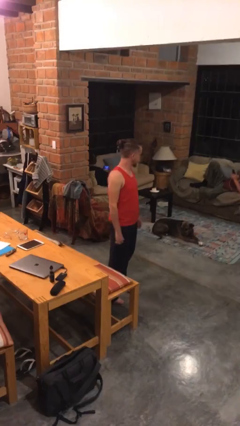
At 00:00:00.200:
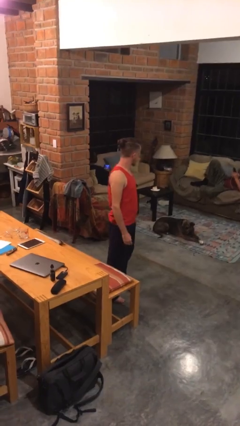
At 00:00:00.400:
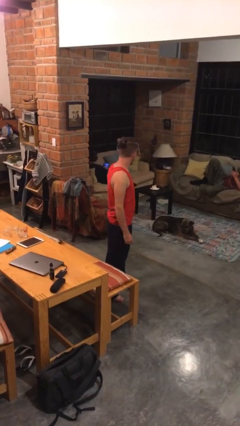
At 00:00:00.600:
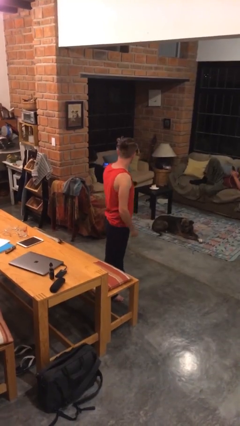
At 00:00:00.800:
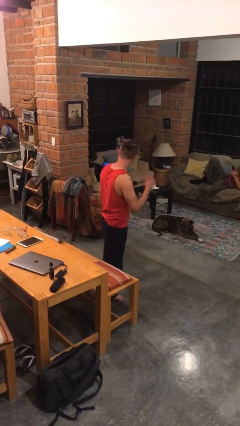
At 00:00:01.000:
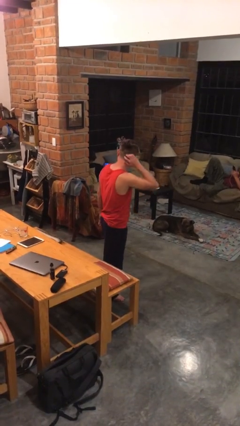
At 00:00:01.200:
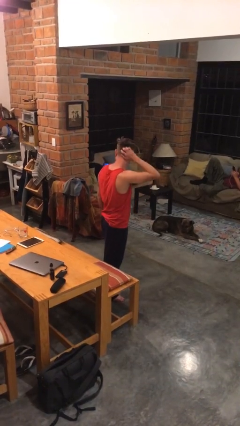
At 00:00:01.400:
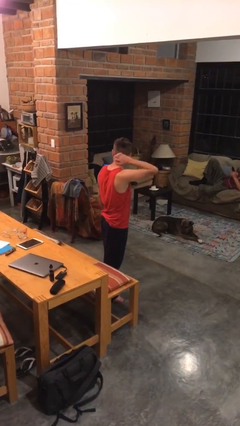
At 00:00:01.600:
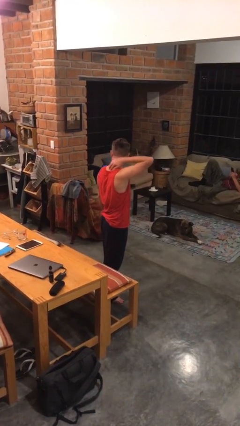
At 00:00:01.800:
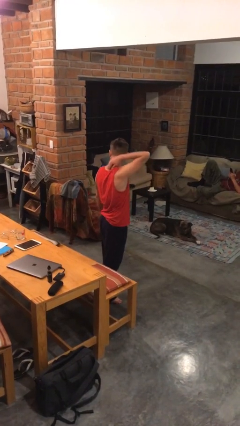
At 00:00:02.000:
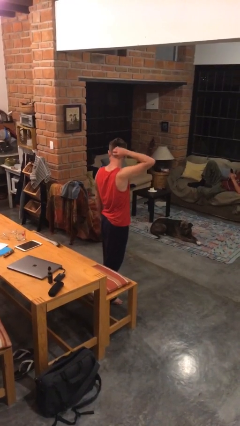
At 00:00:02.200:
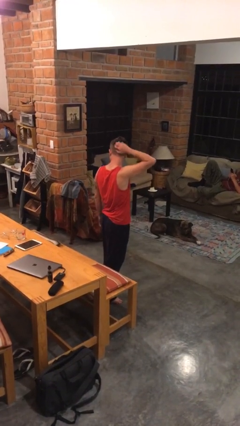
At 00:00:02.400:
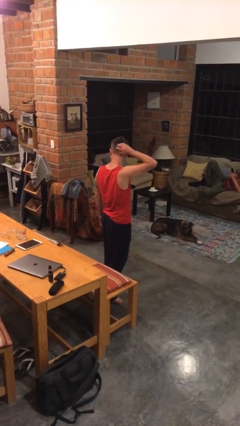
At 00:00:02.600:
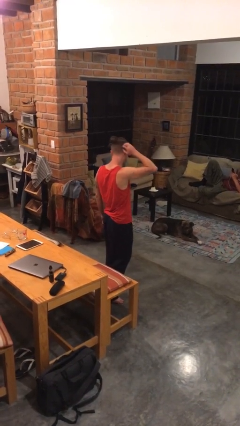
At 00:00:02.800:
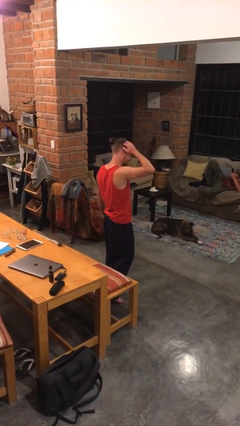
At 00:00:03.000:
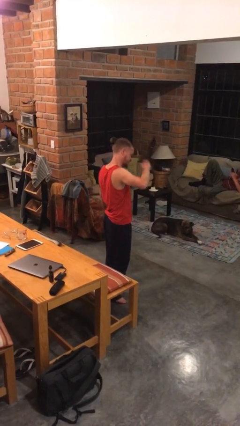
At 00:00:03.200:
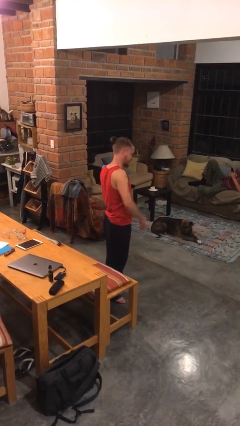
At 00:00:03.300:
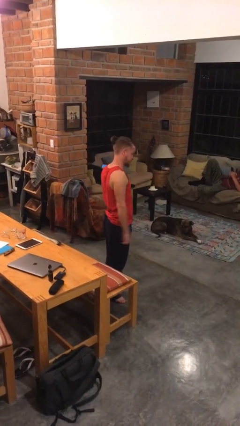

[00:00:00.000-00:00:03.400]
person scratches face

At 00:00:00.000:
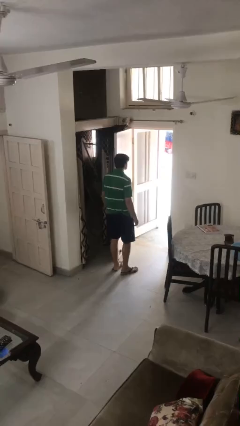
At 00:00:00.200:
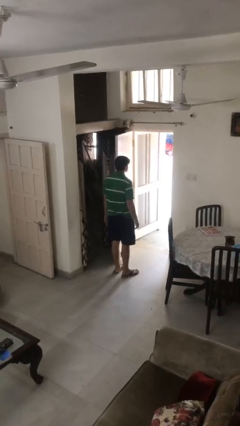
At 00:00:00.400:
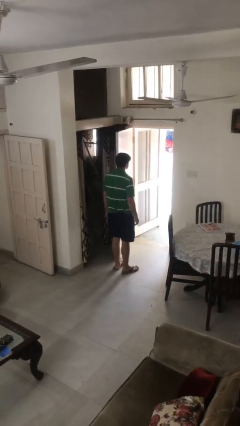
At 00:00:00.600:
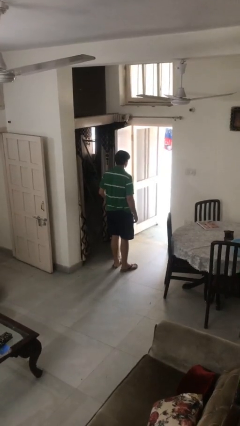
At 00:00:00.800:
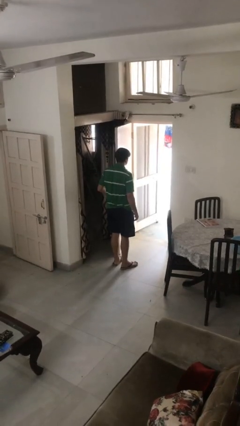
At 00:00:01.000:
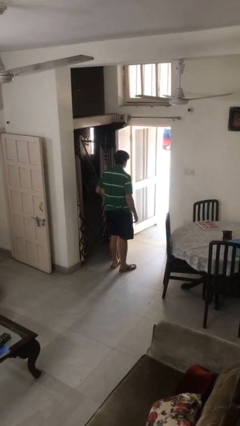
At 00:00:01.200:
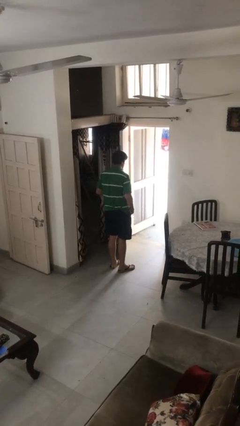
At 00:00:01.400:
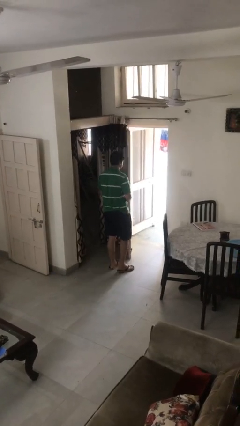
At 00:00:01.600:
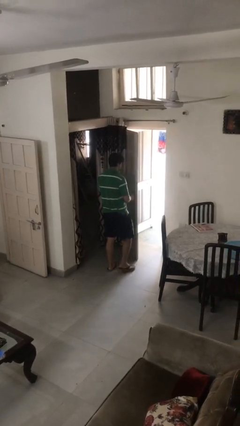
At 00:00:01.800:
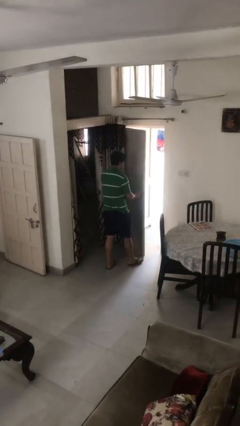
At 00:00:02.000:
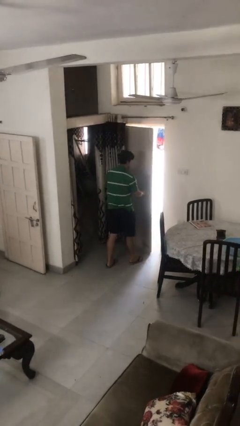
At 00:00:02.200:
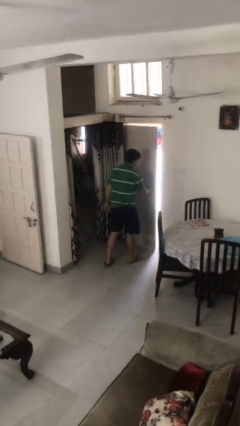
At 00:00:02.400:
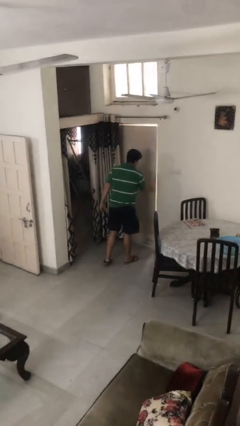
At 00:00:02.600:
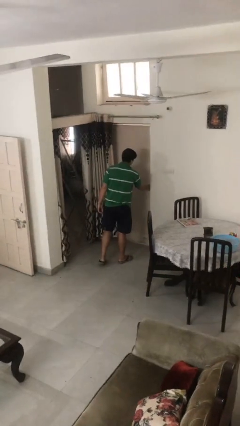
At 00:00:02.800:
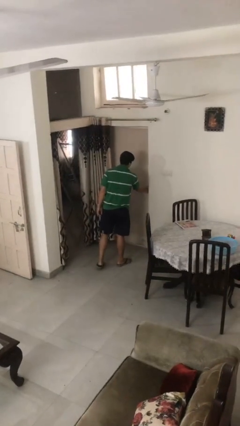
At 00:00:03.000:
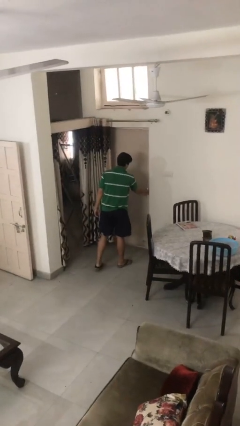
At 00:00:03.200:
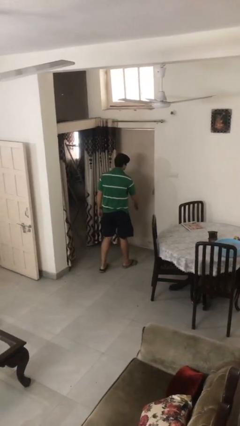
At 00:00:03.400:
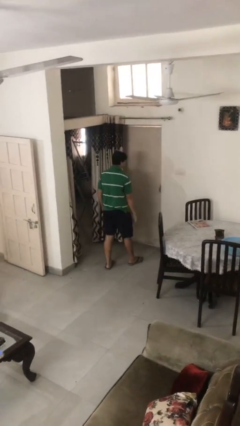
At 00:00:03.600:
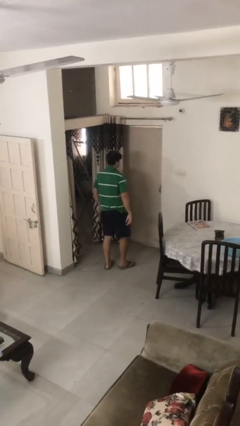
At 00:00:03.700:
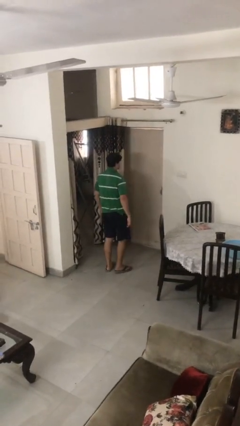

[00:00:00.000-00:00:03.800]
person closes facility door

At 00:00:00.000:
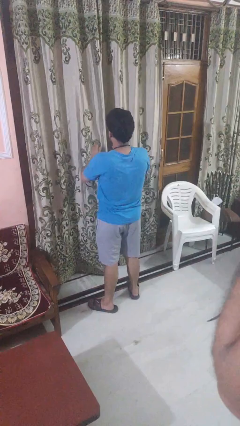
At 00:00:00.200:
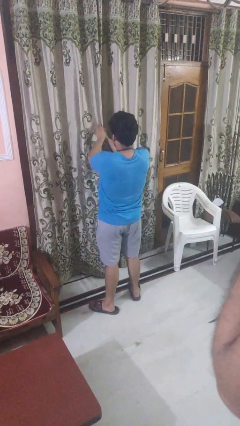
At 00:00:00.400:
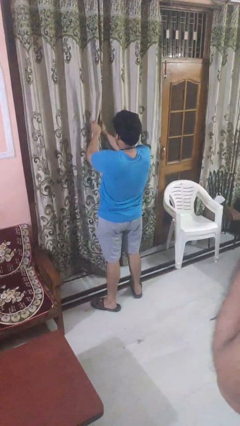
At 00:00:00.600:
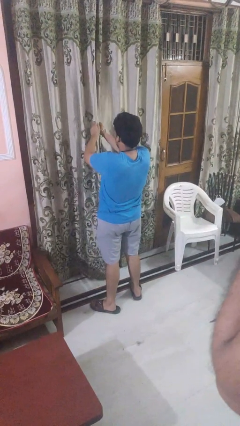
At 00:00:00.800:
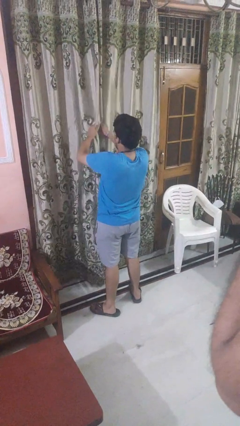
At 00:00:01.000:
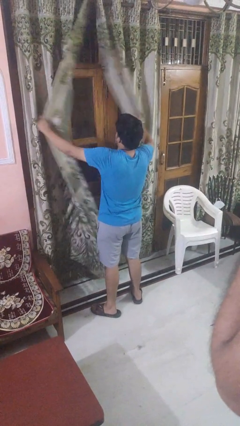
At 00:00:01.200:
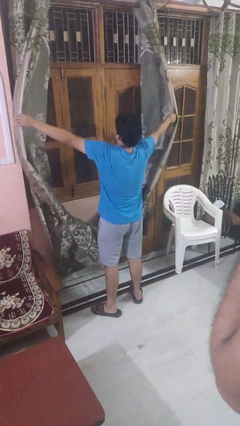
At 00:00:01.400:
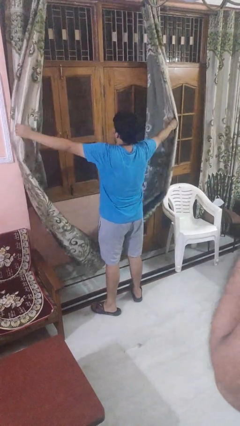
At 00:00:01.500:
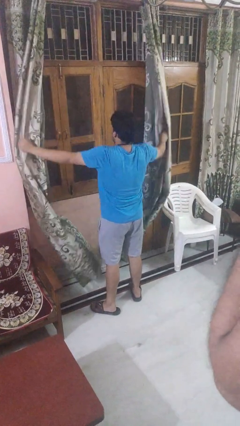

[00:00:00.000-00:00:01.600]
person opens curtains

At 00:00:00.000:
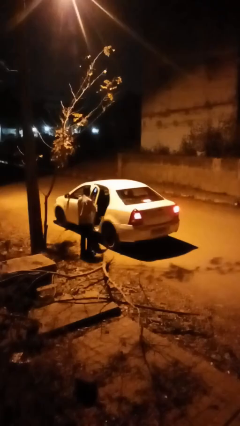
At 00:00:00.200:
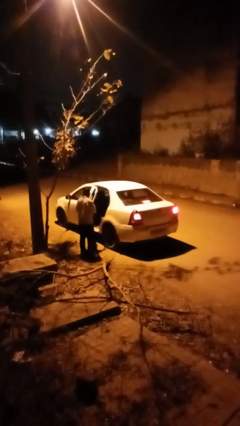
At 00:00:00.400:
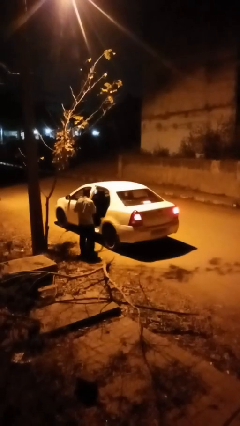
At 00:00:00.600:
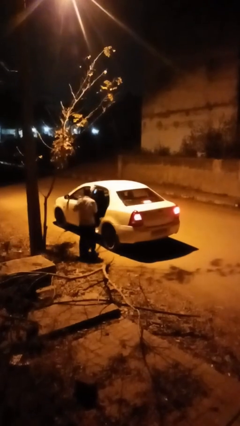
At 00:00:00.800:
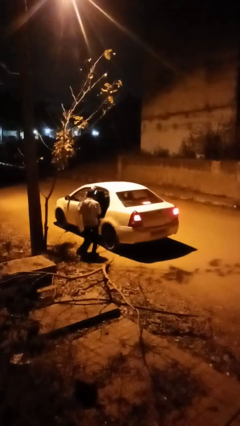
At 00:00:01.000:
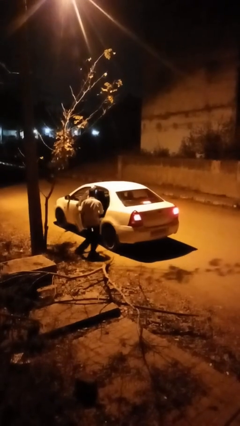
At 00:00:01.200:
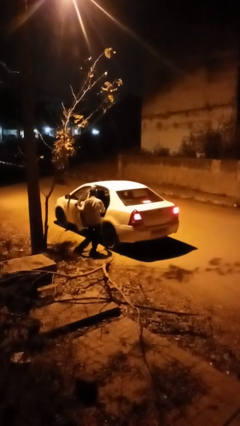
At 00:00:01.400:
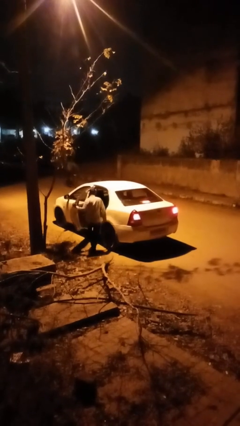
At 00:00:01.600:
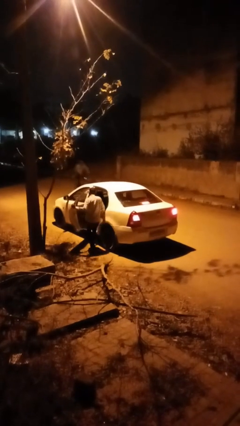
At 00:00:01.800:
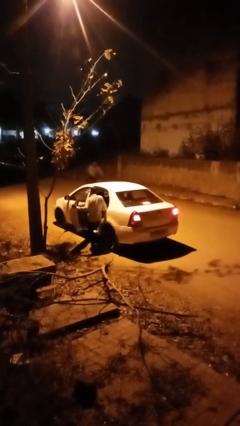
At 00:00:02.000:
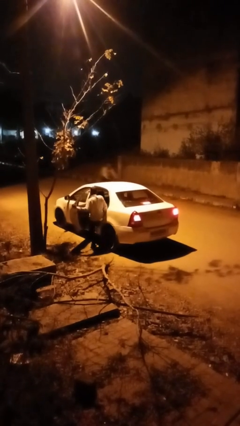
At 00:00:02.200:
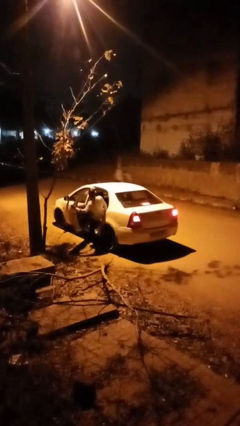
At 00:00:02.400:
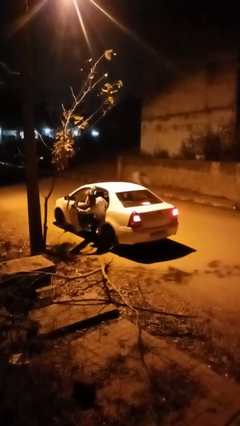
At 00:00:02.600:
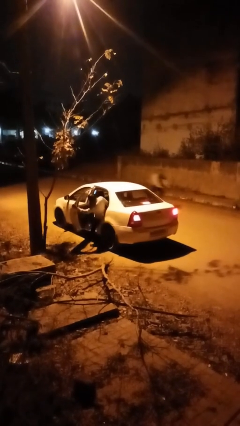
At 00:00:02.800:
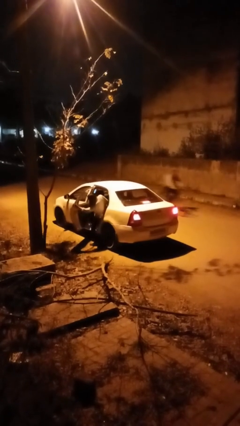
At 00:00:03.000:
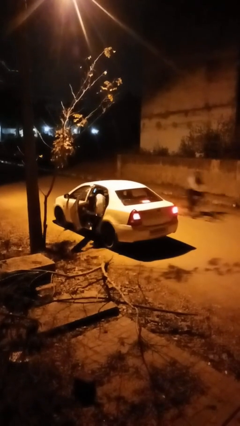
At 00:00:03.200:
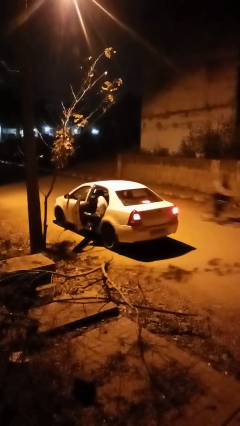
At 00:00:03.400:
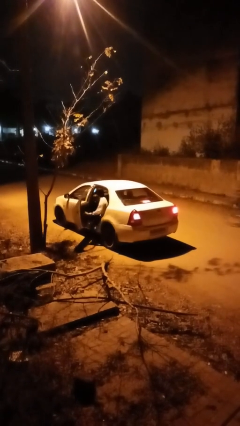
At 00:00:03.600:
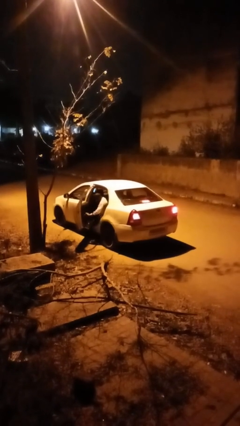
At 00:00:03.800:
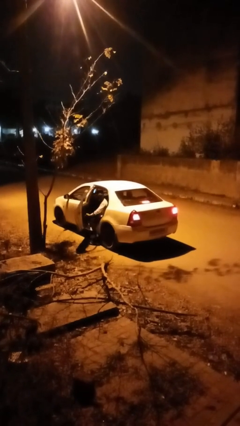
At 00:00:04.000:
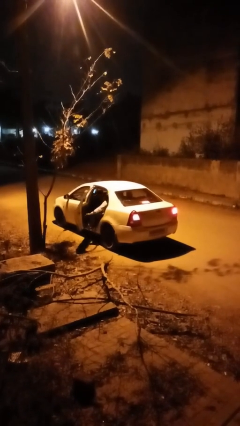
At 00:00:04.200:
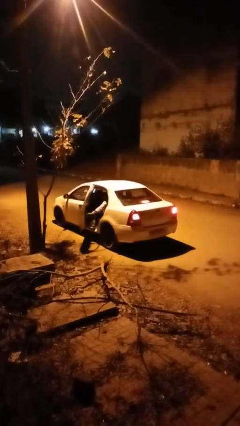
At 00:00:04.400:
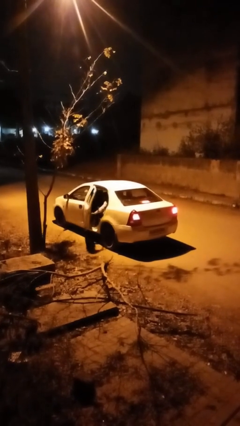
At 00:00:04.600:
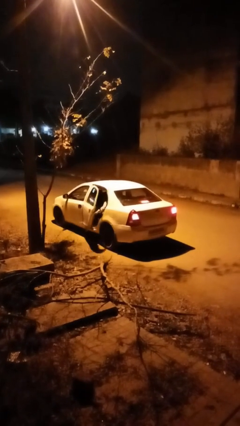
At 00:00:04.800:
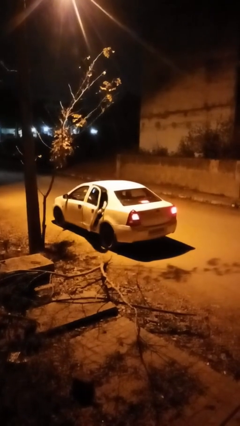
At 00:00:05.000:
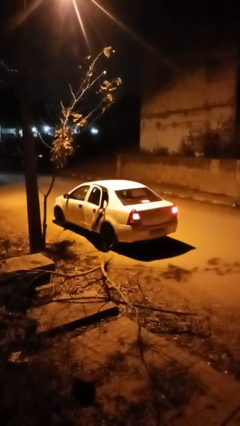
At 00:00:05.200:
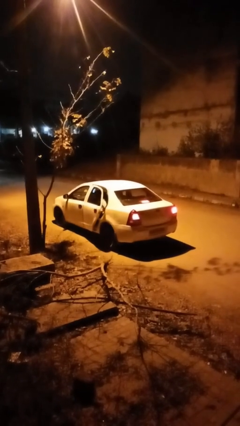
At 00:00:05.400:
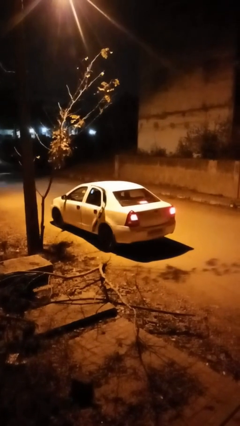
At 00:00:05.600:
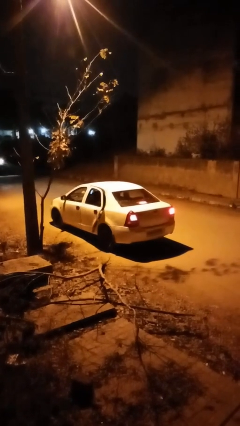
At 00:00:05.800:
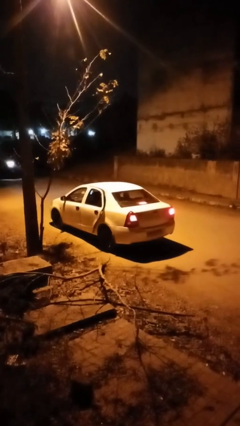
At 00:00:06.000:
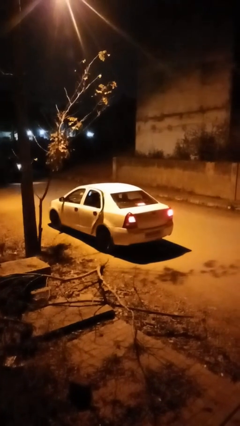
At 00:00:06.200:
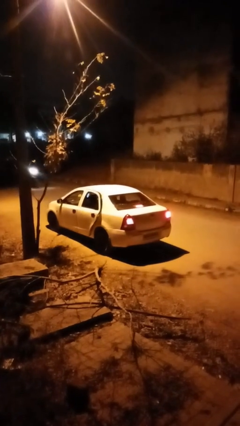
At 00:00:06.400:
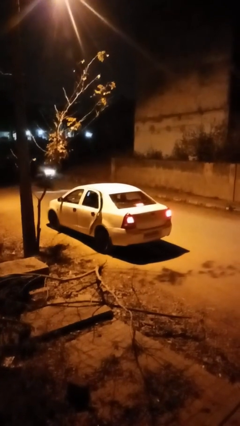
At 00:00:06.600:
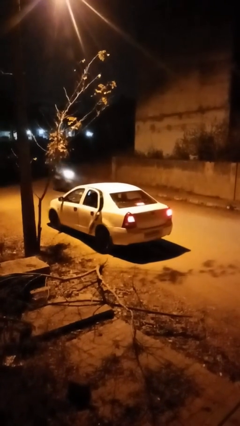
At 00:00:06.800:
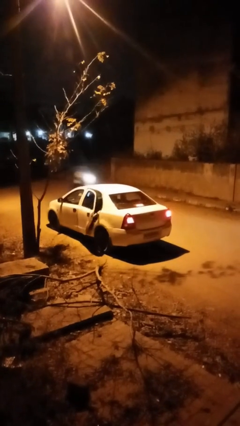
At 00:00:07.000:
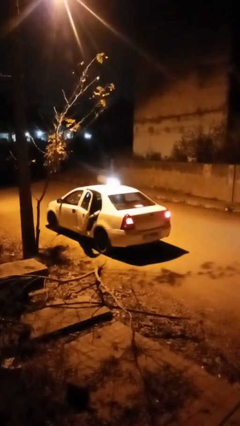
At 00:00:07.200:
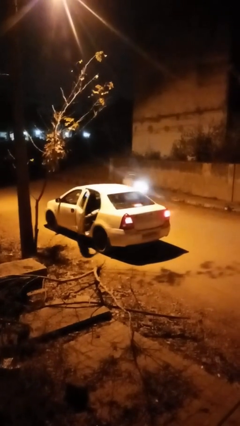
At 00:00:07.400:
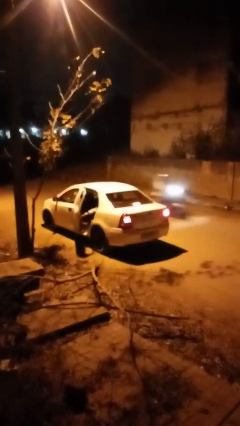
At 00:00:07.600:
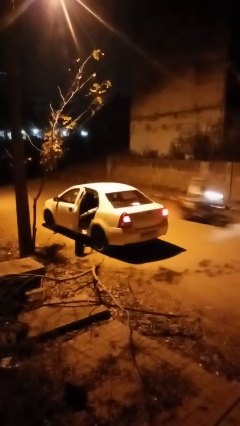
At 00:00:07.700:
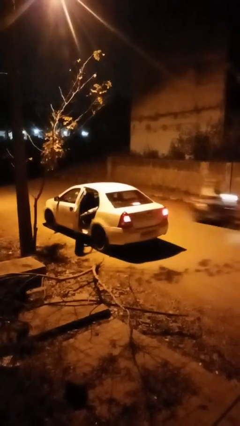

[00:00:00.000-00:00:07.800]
car picks up person

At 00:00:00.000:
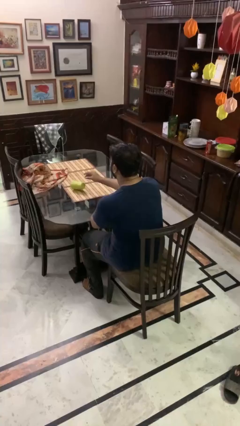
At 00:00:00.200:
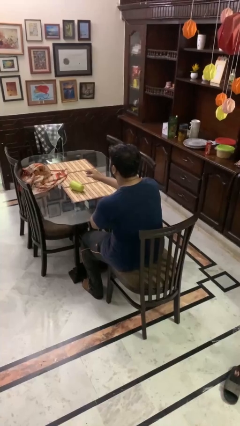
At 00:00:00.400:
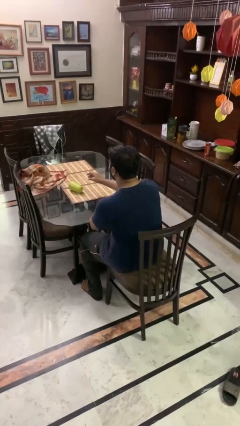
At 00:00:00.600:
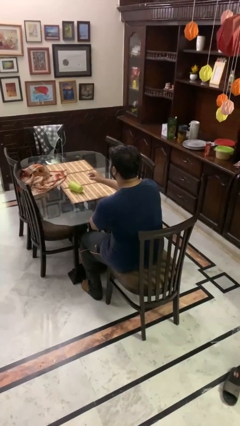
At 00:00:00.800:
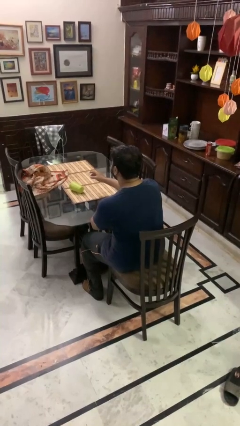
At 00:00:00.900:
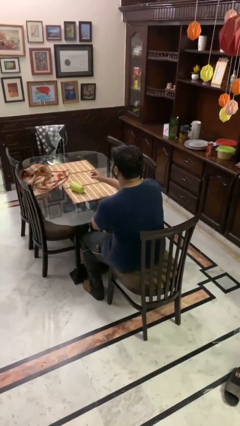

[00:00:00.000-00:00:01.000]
person knocks over glass
